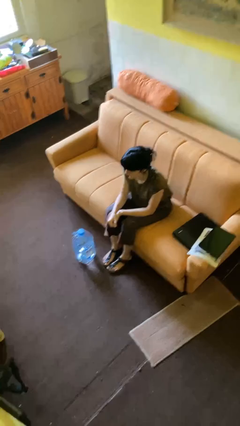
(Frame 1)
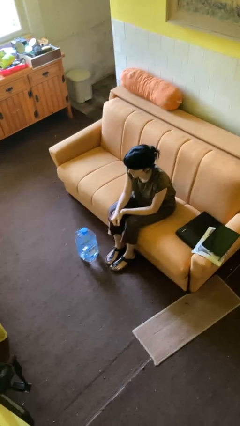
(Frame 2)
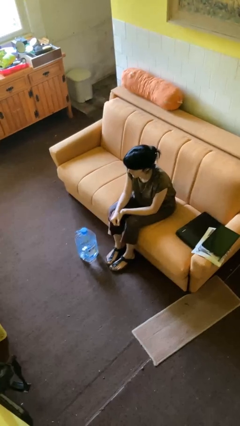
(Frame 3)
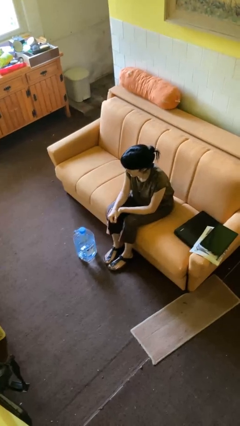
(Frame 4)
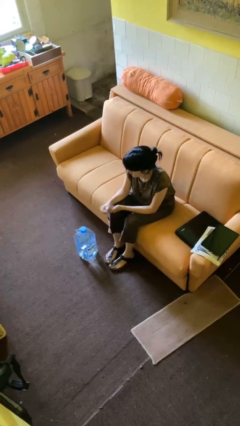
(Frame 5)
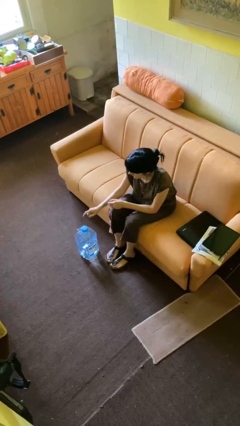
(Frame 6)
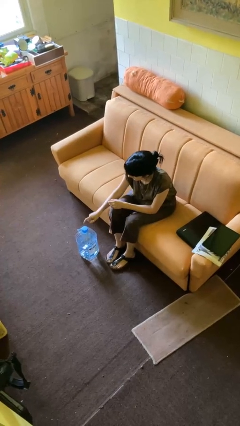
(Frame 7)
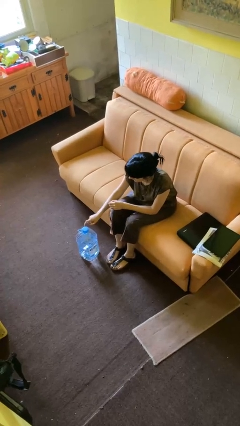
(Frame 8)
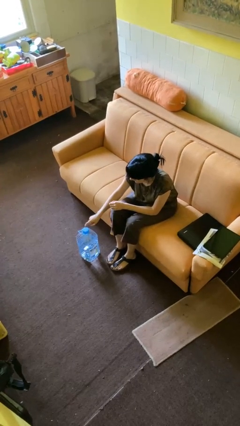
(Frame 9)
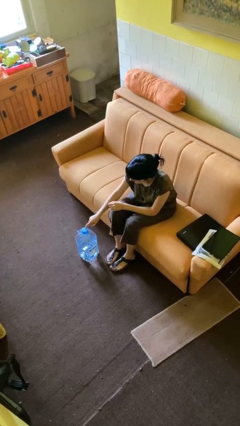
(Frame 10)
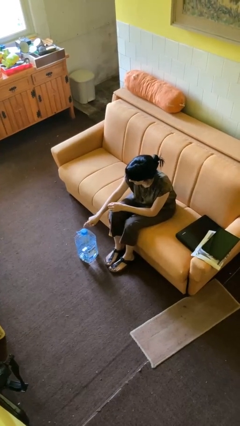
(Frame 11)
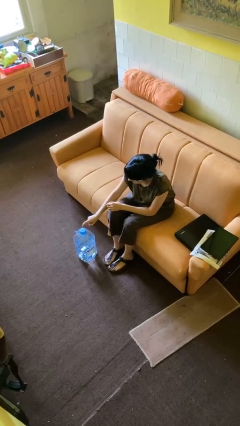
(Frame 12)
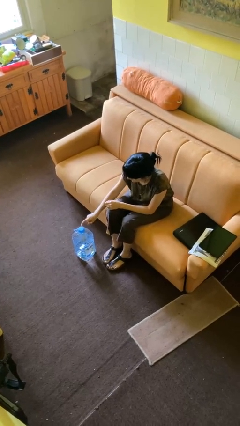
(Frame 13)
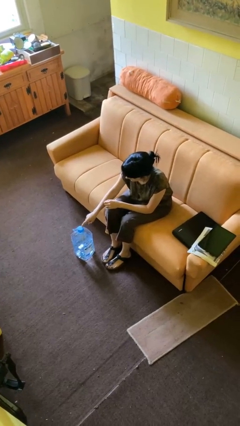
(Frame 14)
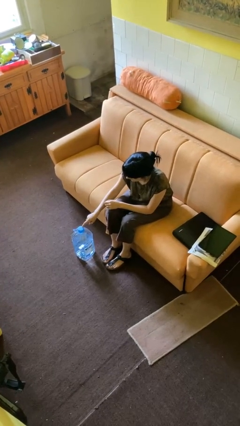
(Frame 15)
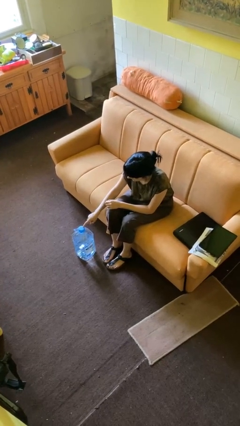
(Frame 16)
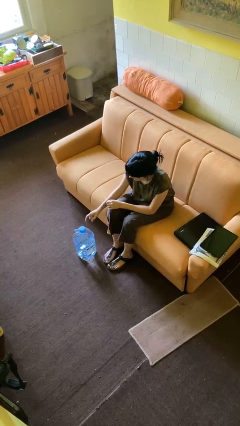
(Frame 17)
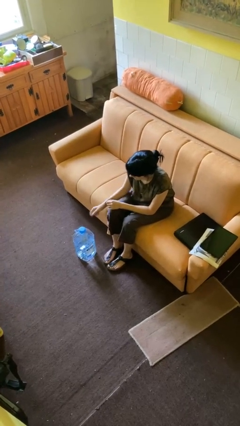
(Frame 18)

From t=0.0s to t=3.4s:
person taps object with finger

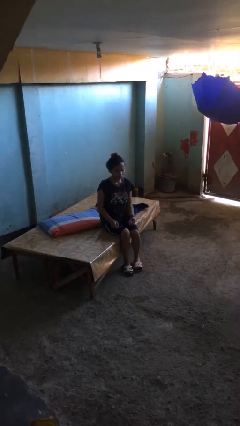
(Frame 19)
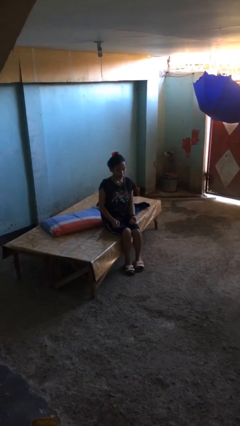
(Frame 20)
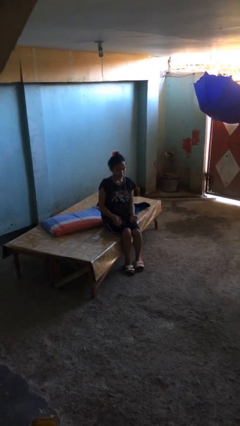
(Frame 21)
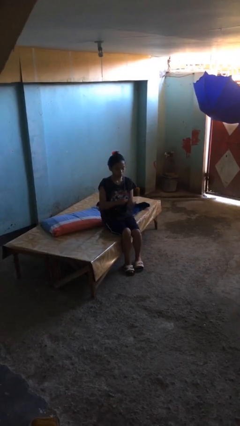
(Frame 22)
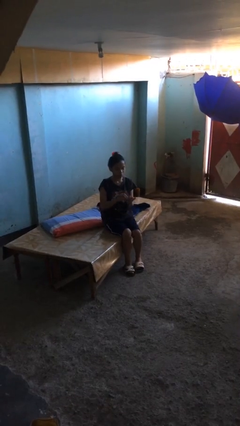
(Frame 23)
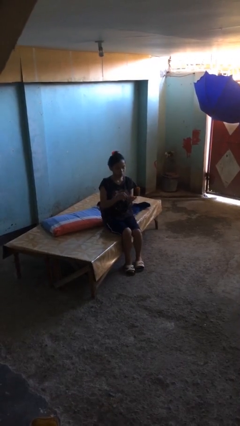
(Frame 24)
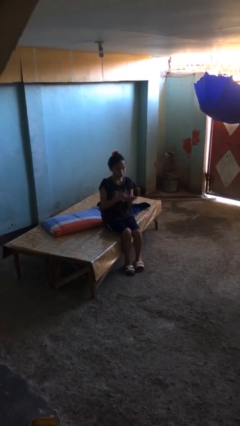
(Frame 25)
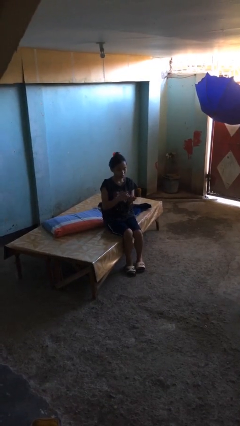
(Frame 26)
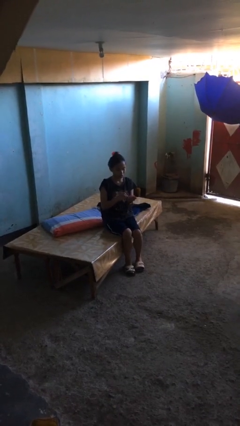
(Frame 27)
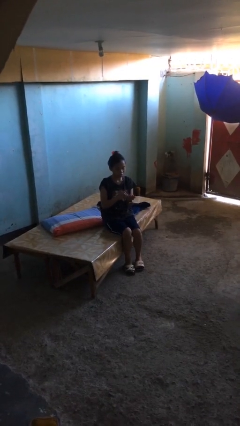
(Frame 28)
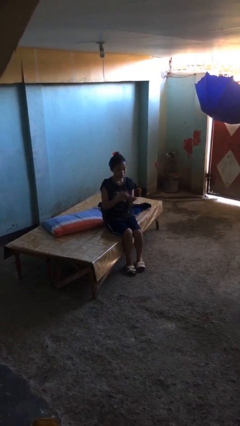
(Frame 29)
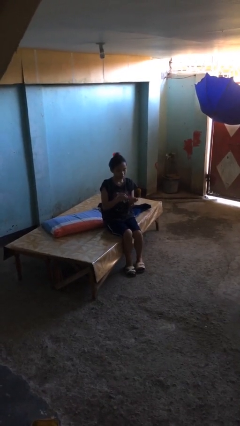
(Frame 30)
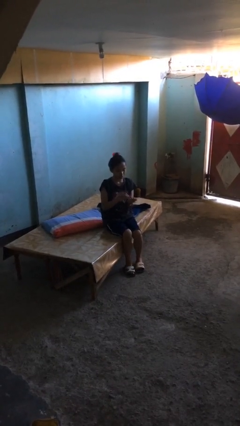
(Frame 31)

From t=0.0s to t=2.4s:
person files fingernails

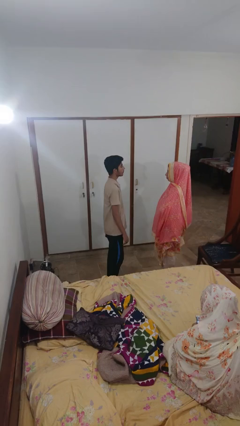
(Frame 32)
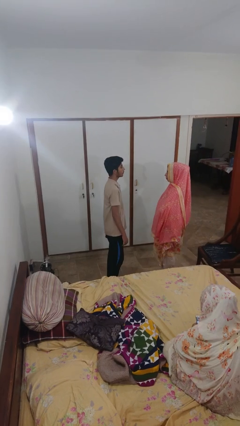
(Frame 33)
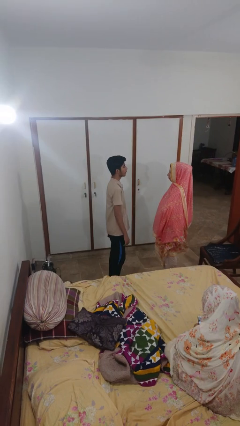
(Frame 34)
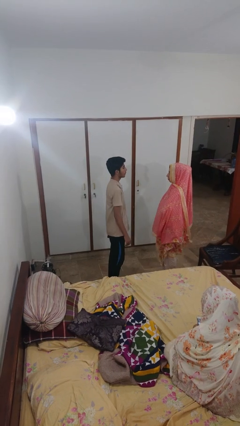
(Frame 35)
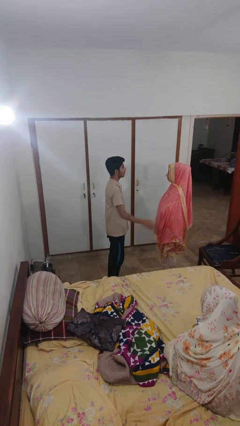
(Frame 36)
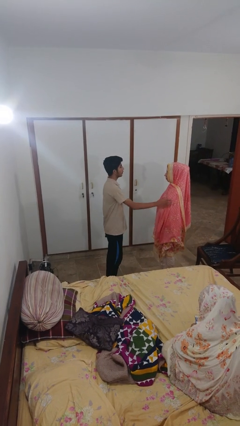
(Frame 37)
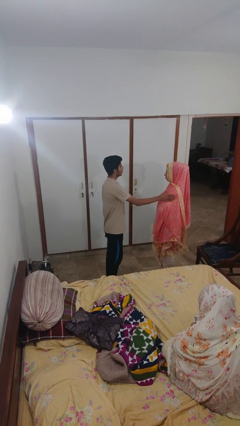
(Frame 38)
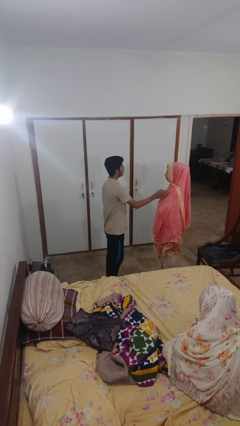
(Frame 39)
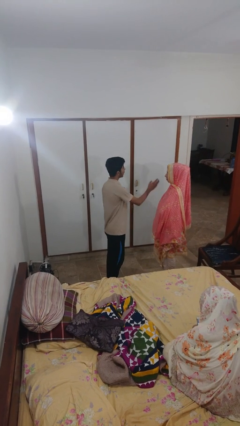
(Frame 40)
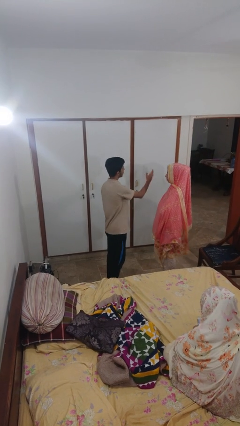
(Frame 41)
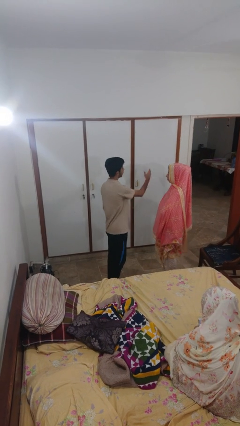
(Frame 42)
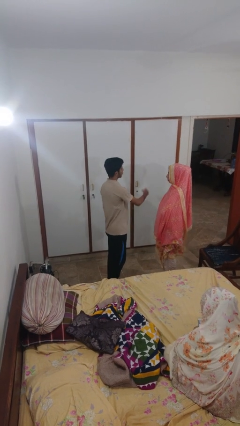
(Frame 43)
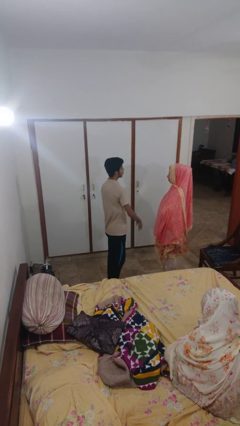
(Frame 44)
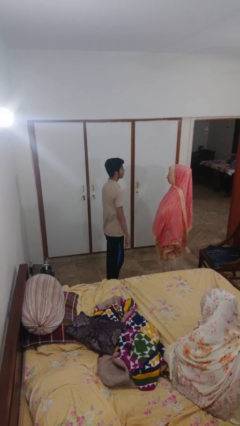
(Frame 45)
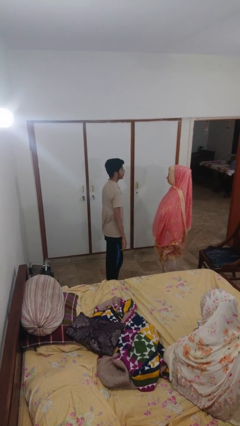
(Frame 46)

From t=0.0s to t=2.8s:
person shoves person

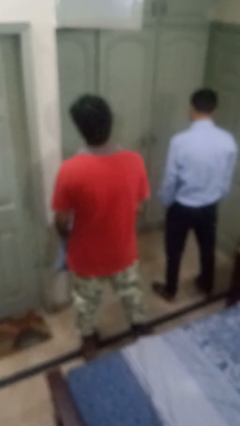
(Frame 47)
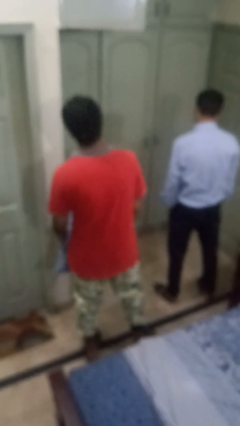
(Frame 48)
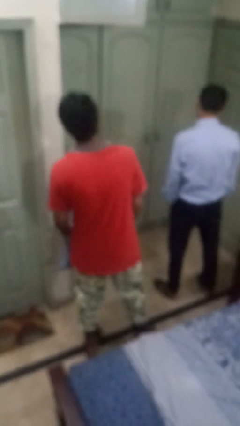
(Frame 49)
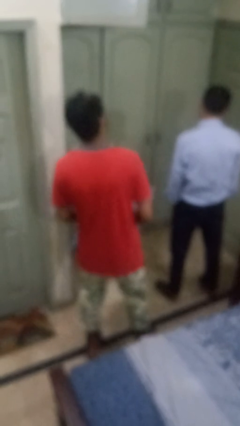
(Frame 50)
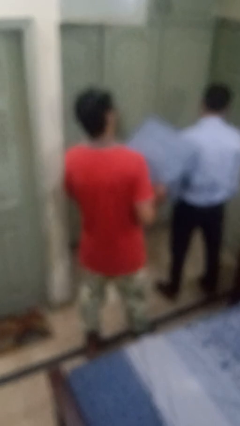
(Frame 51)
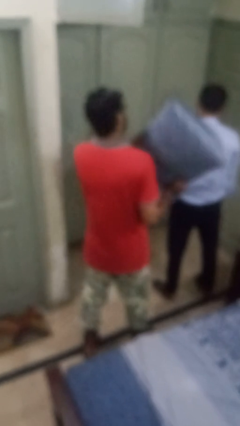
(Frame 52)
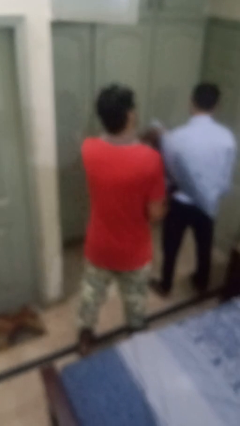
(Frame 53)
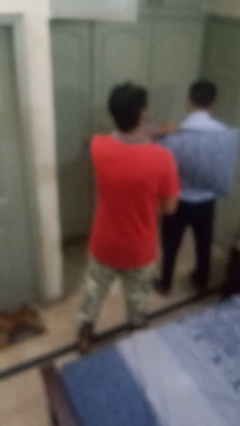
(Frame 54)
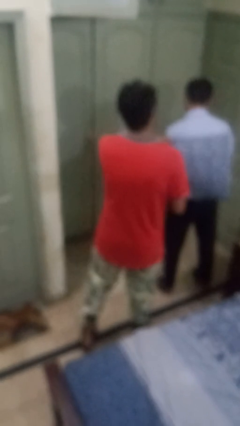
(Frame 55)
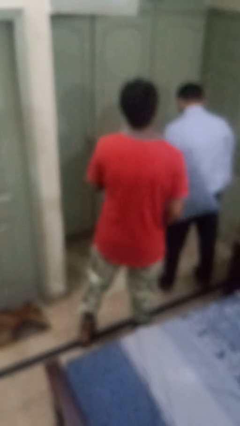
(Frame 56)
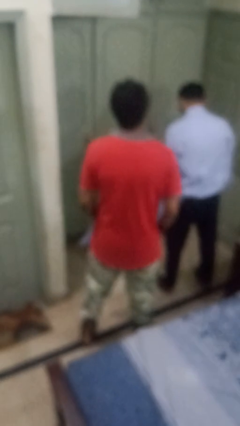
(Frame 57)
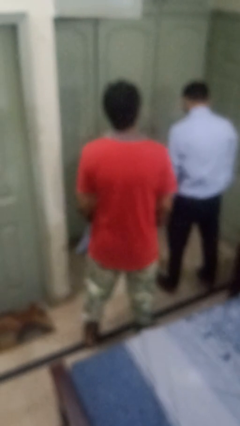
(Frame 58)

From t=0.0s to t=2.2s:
person hits person with pillow

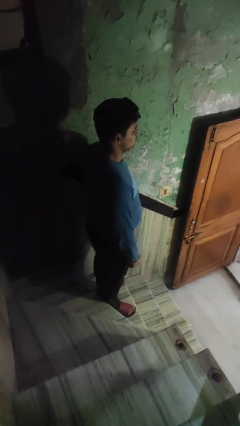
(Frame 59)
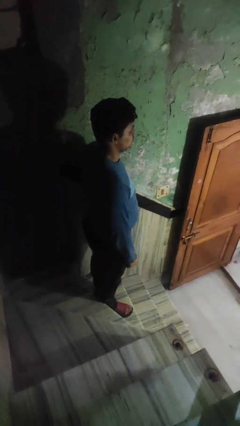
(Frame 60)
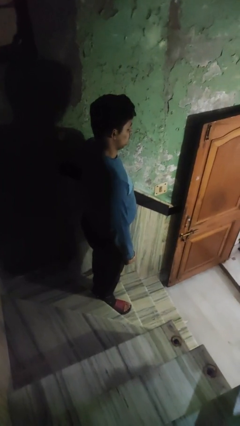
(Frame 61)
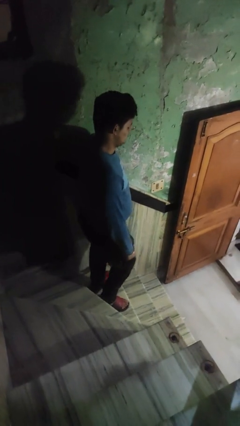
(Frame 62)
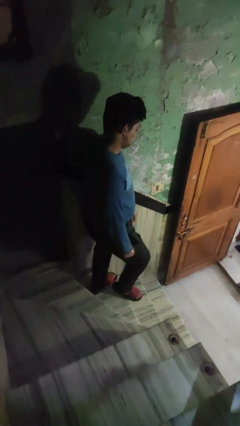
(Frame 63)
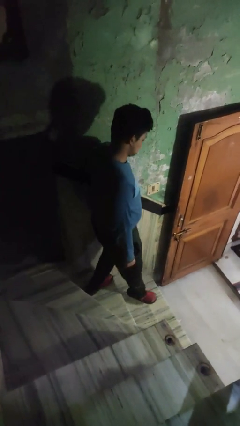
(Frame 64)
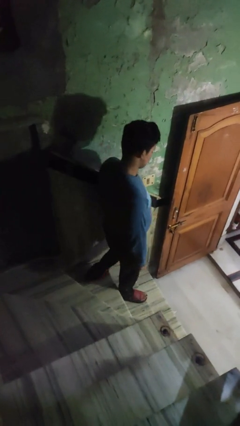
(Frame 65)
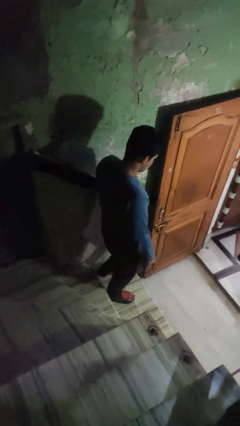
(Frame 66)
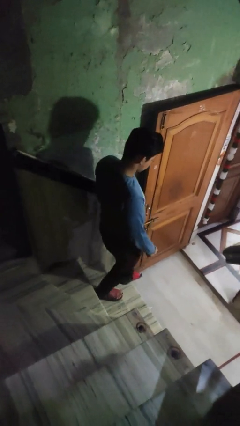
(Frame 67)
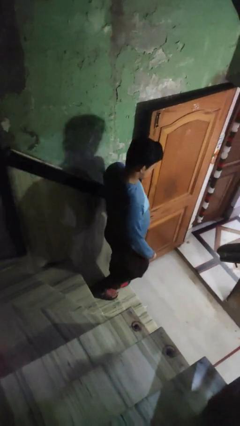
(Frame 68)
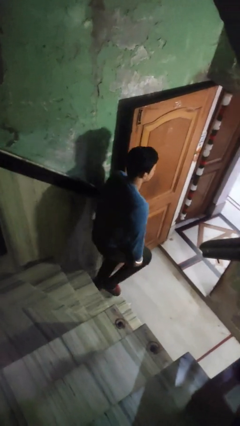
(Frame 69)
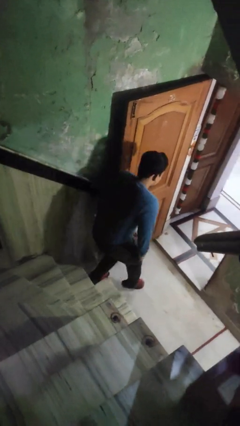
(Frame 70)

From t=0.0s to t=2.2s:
person climbs down stairs

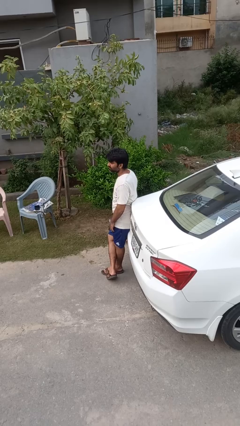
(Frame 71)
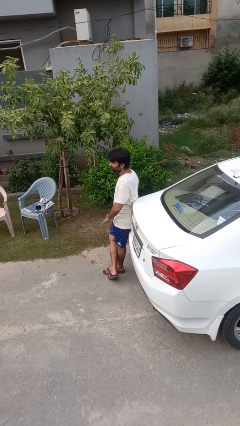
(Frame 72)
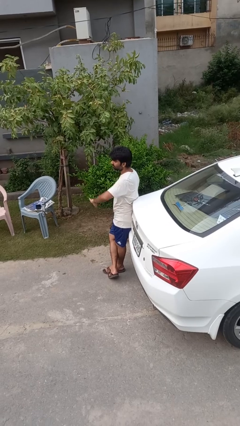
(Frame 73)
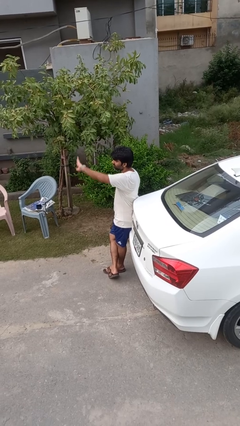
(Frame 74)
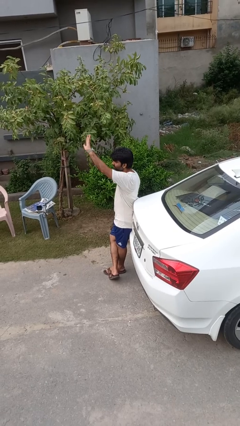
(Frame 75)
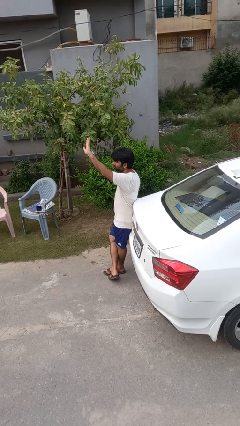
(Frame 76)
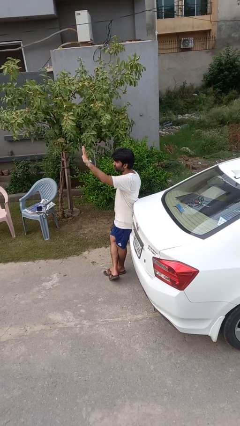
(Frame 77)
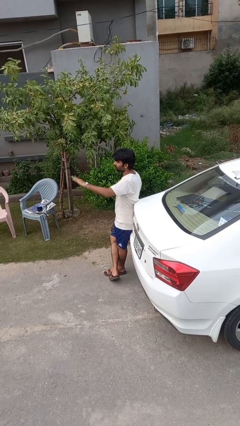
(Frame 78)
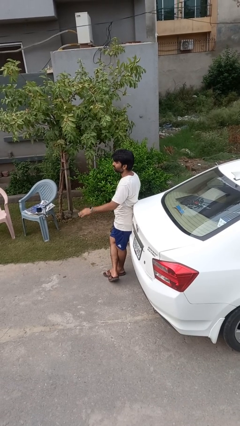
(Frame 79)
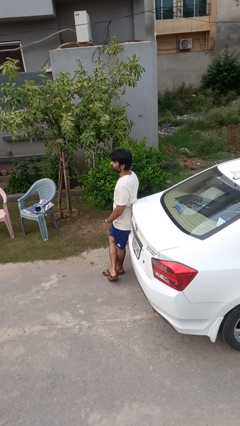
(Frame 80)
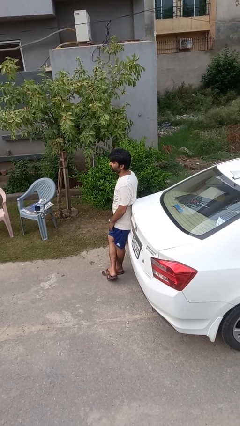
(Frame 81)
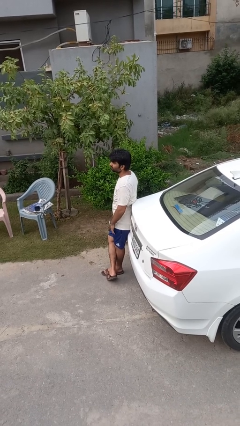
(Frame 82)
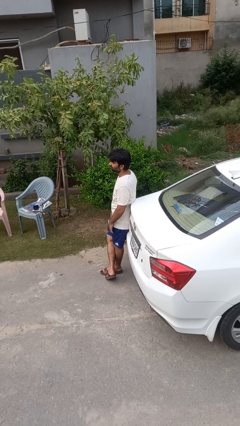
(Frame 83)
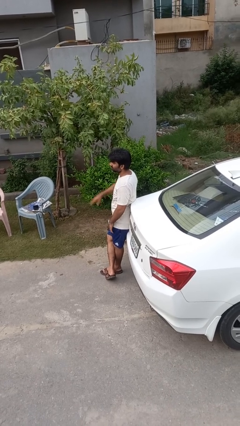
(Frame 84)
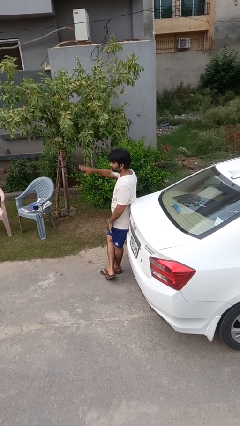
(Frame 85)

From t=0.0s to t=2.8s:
person gestures swipe up

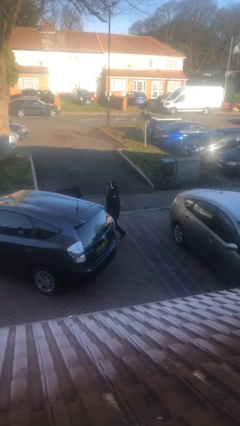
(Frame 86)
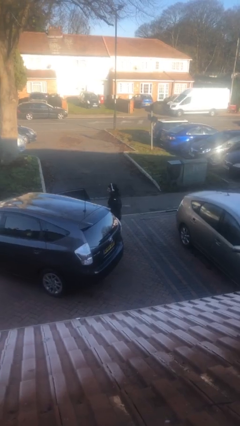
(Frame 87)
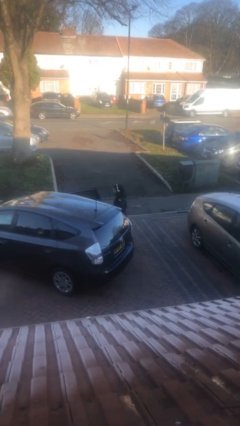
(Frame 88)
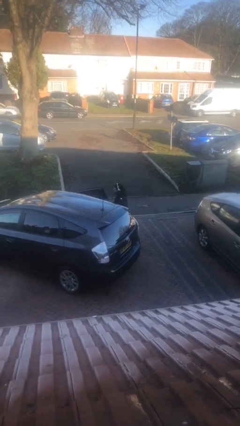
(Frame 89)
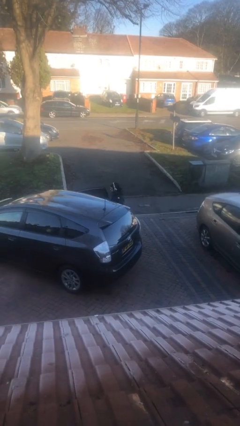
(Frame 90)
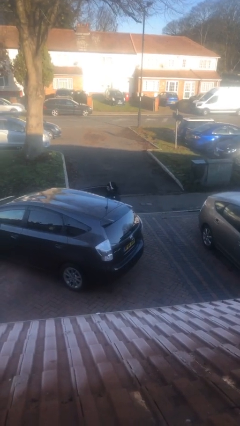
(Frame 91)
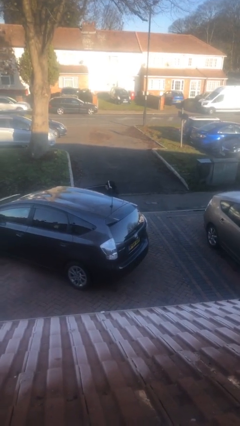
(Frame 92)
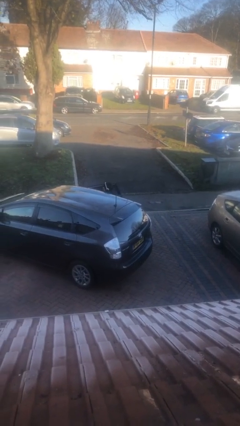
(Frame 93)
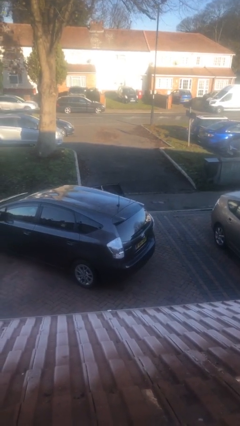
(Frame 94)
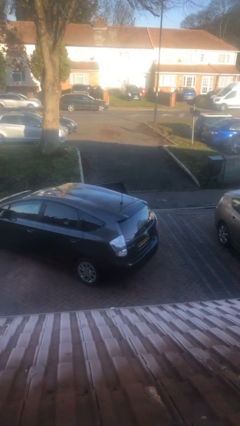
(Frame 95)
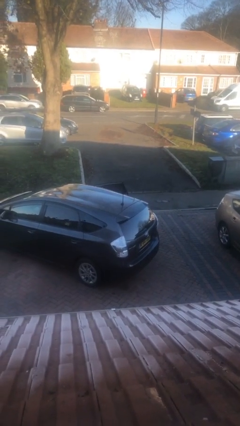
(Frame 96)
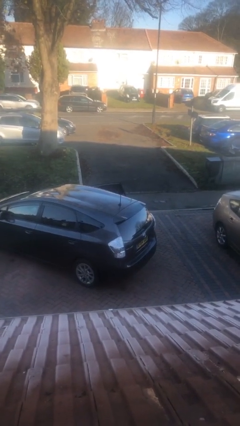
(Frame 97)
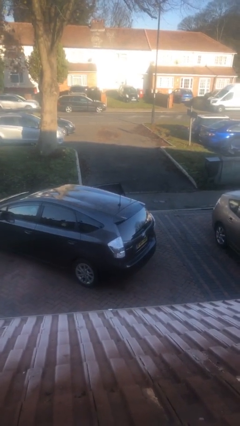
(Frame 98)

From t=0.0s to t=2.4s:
person enters car
